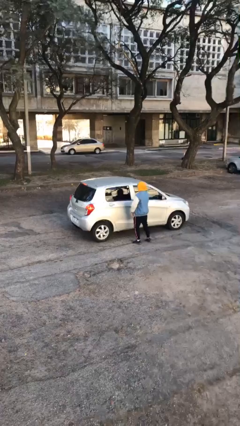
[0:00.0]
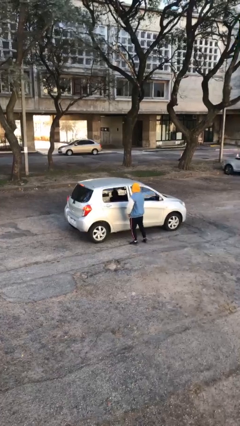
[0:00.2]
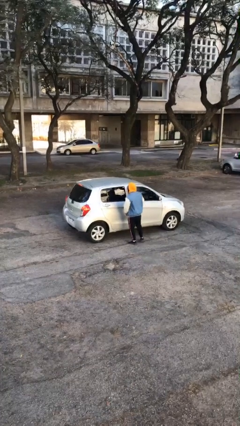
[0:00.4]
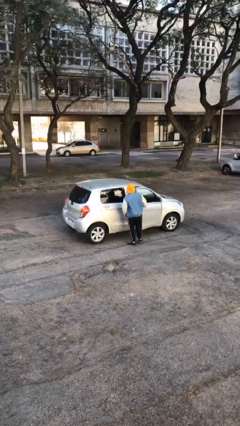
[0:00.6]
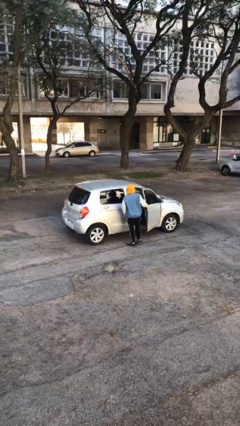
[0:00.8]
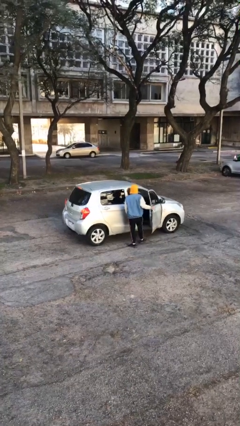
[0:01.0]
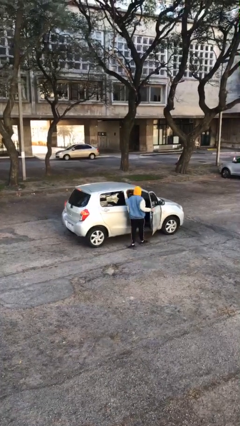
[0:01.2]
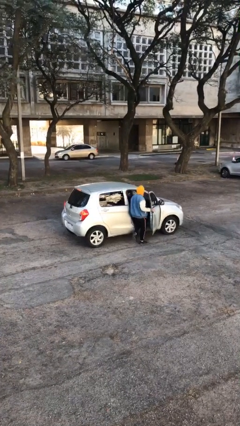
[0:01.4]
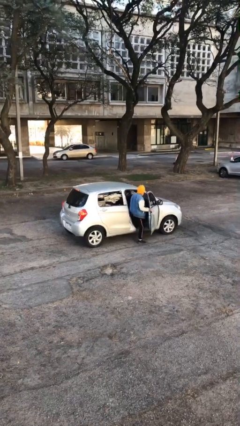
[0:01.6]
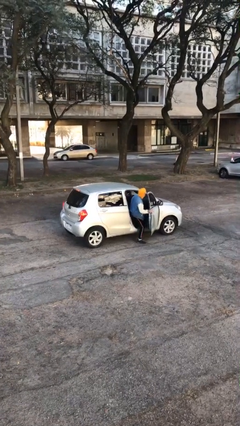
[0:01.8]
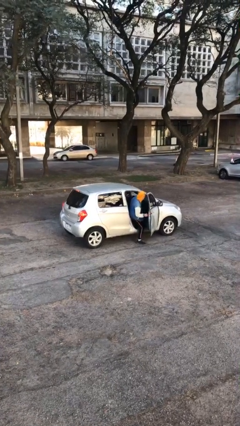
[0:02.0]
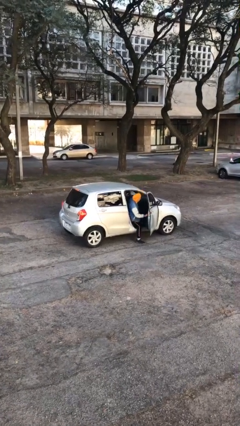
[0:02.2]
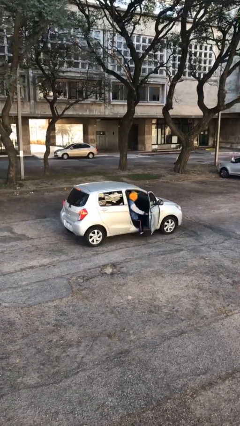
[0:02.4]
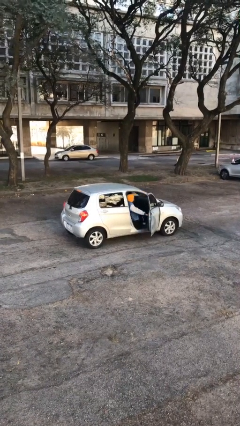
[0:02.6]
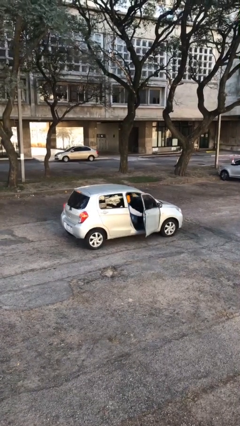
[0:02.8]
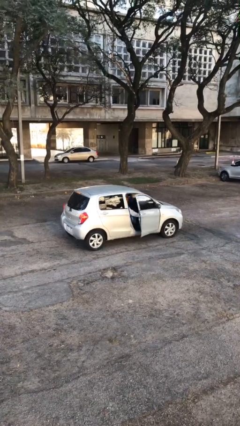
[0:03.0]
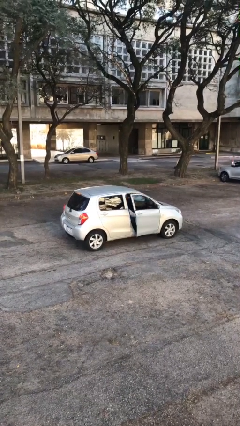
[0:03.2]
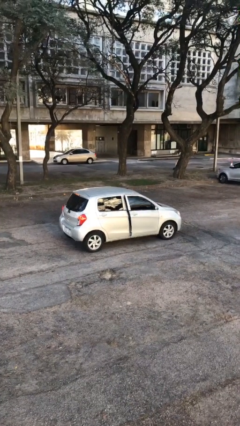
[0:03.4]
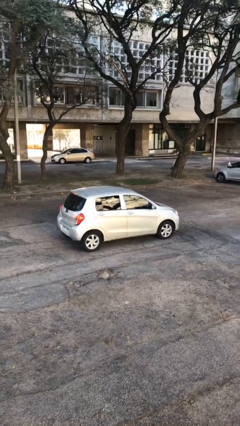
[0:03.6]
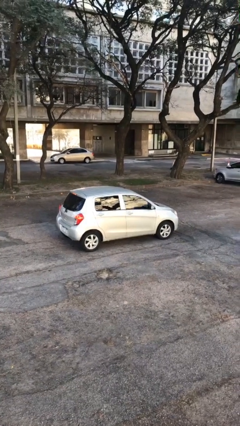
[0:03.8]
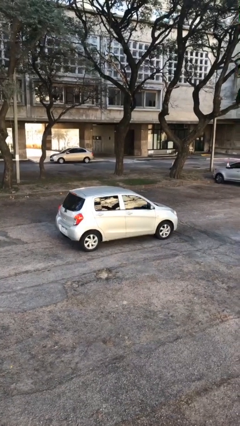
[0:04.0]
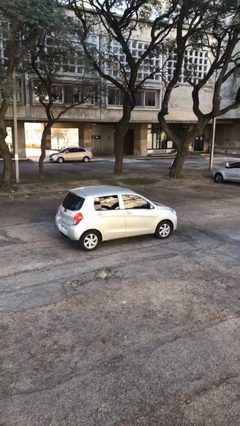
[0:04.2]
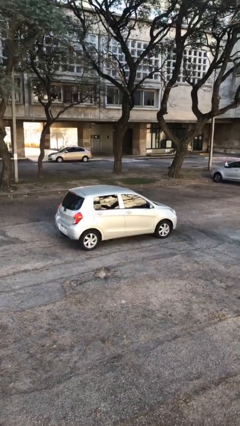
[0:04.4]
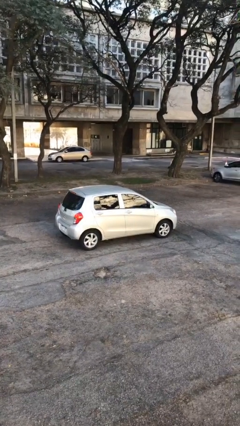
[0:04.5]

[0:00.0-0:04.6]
car picks up person

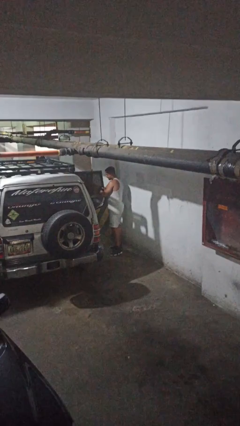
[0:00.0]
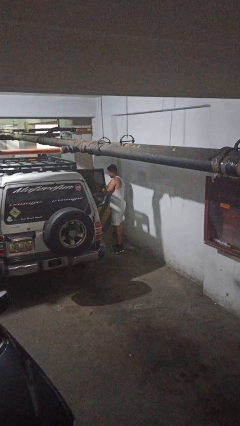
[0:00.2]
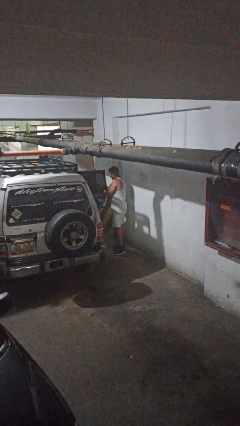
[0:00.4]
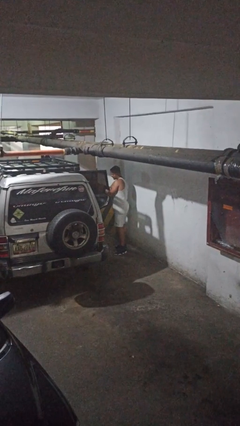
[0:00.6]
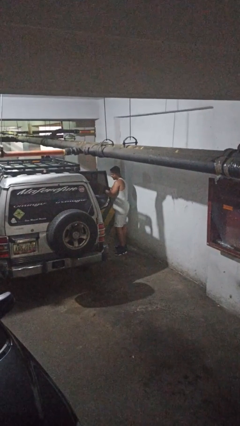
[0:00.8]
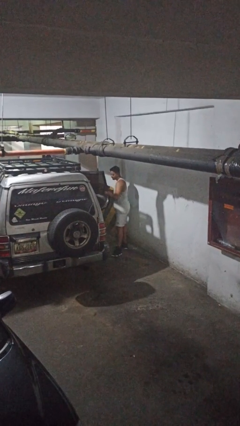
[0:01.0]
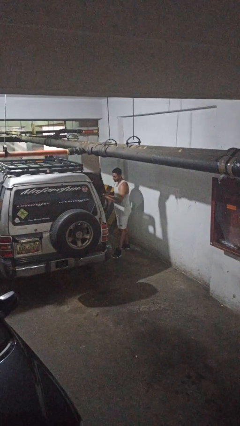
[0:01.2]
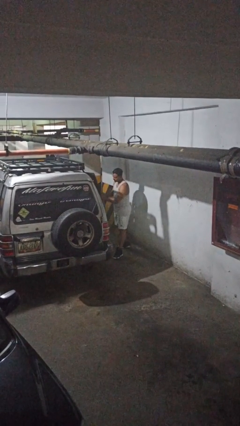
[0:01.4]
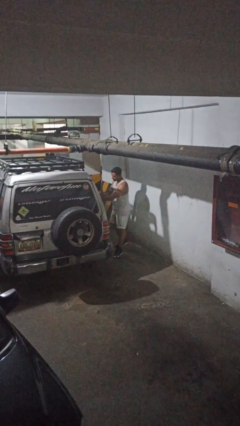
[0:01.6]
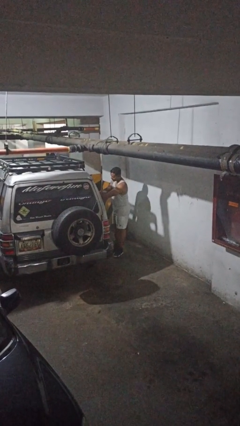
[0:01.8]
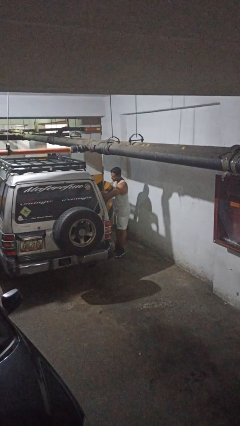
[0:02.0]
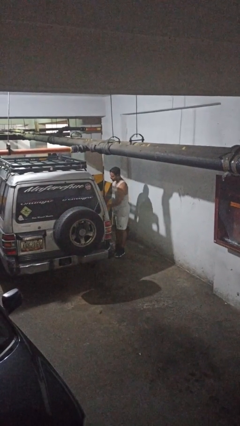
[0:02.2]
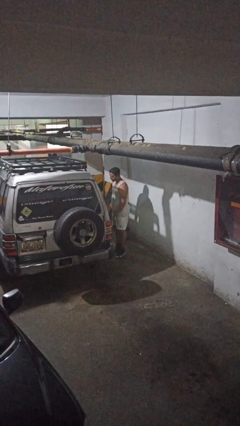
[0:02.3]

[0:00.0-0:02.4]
person closes car door

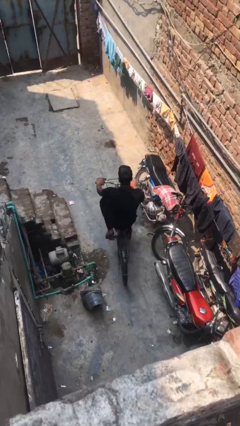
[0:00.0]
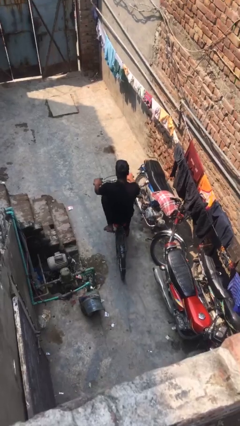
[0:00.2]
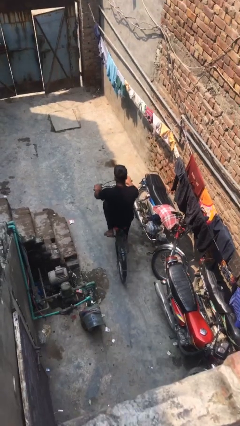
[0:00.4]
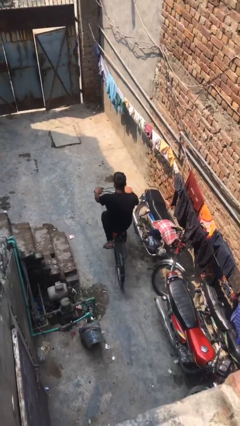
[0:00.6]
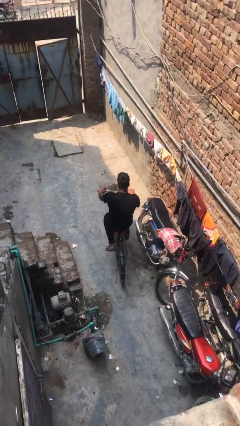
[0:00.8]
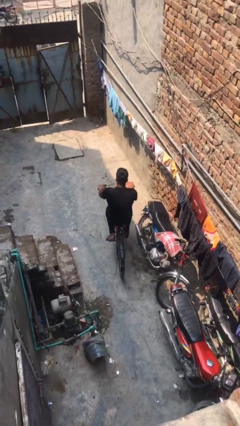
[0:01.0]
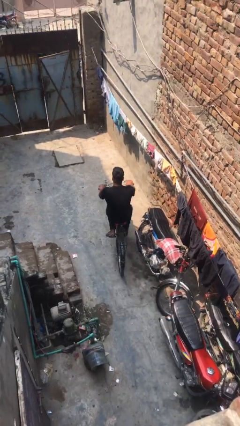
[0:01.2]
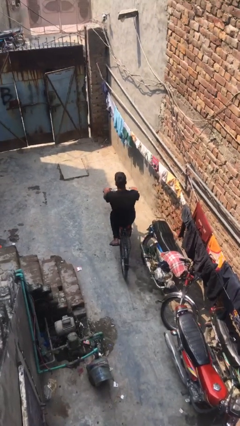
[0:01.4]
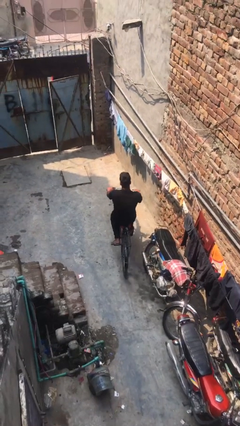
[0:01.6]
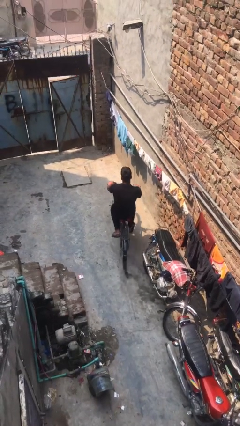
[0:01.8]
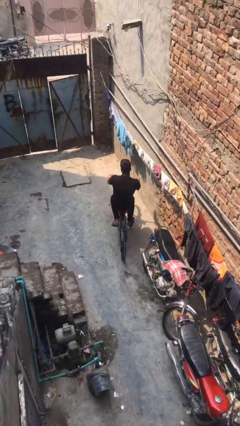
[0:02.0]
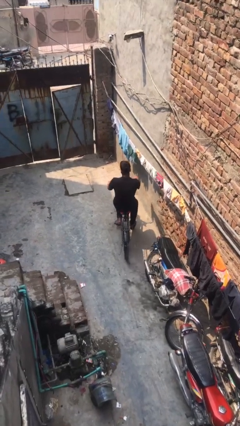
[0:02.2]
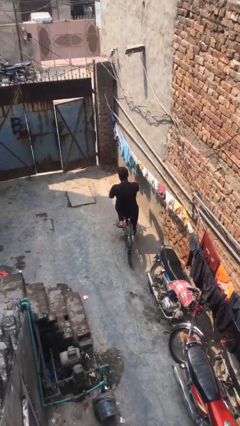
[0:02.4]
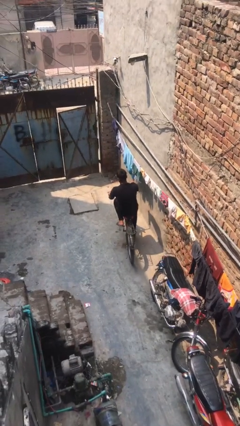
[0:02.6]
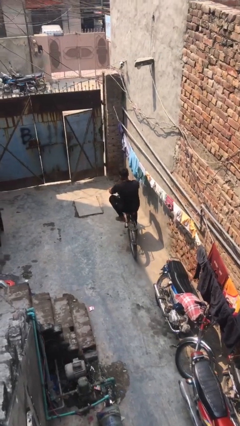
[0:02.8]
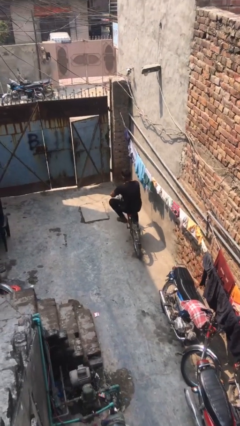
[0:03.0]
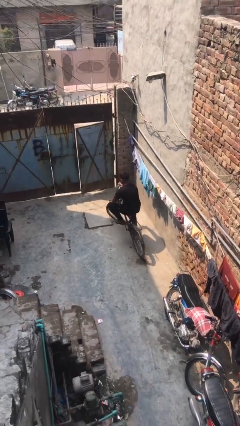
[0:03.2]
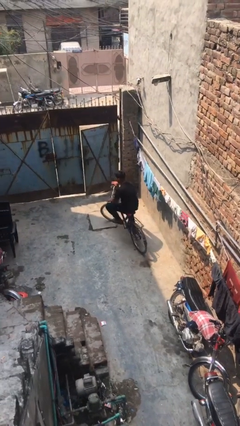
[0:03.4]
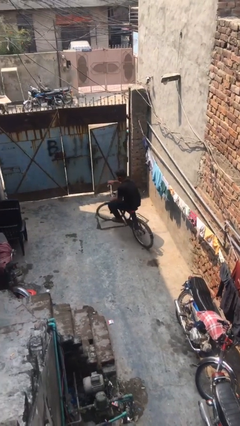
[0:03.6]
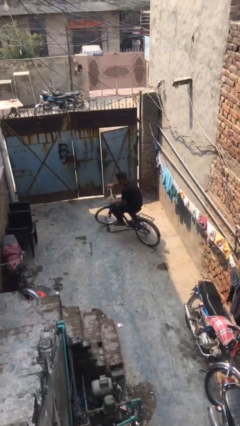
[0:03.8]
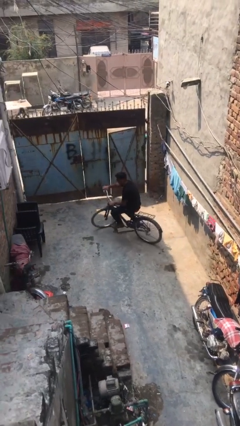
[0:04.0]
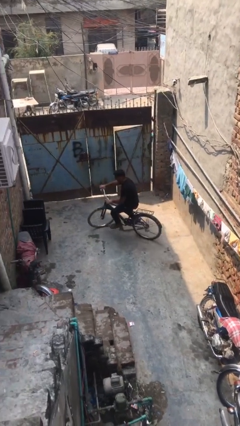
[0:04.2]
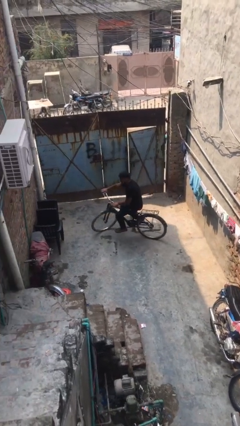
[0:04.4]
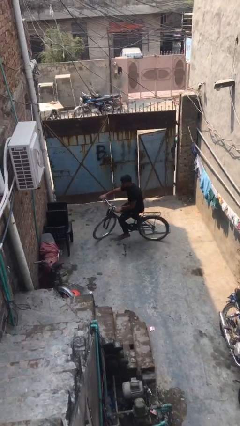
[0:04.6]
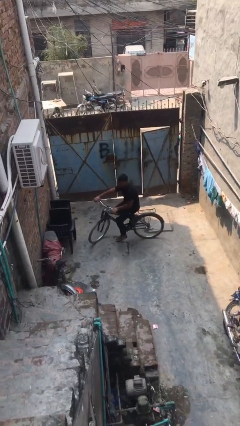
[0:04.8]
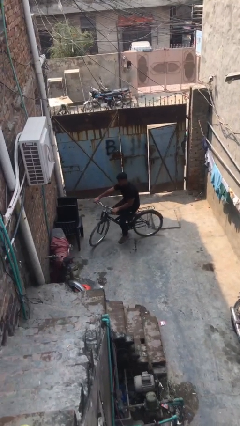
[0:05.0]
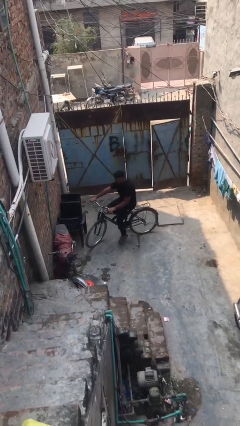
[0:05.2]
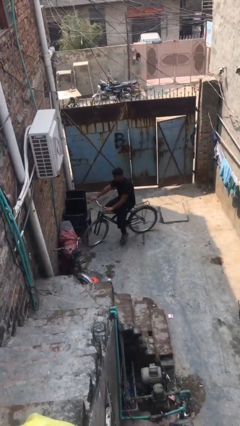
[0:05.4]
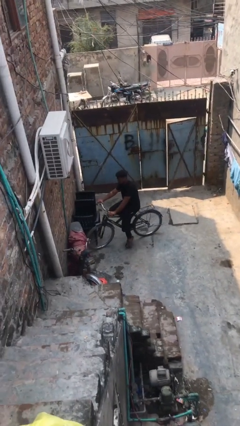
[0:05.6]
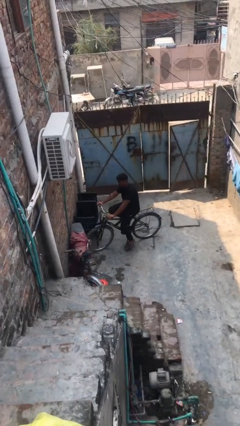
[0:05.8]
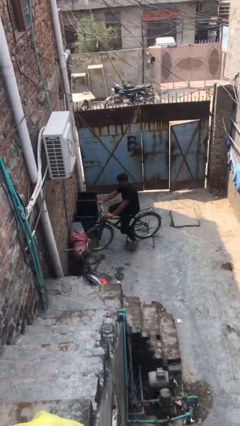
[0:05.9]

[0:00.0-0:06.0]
person rides bicycle

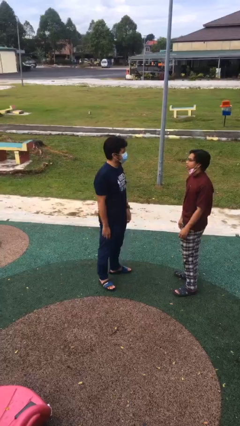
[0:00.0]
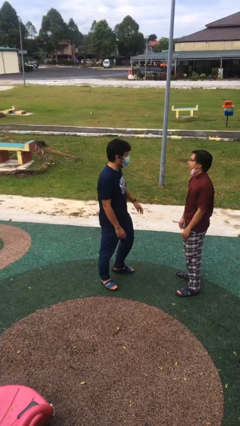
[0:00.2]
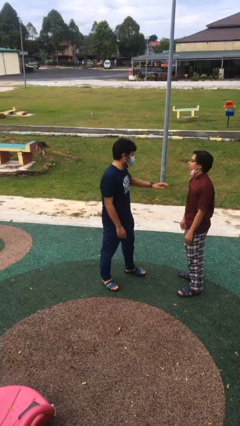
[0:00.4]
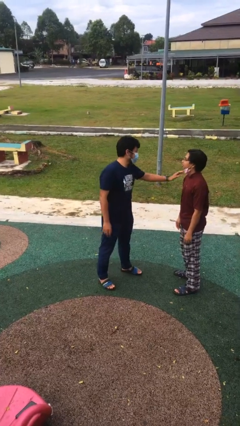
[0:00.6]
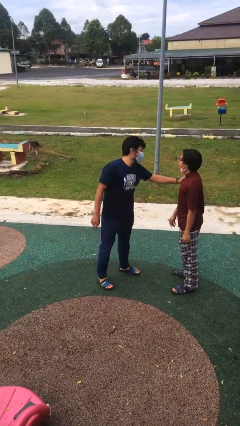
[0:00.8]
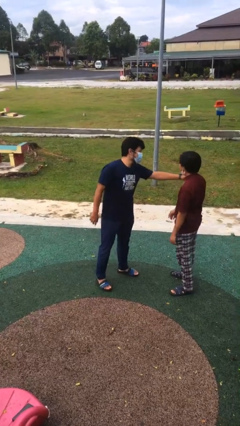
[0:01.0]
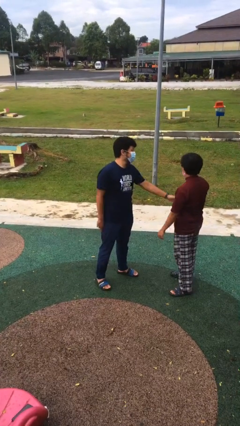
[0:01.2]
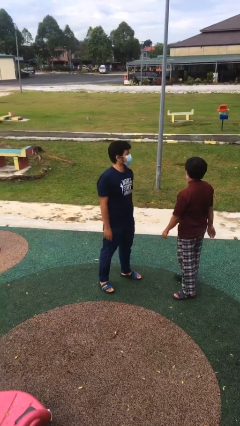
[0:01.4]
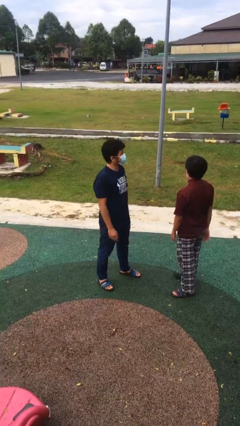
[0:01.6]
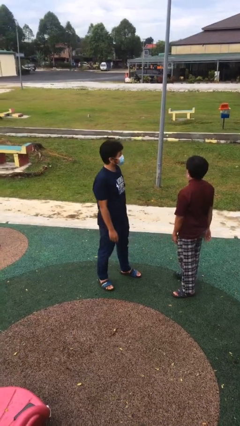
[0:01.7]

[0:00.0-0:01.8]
person shoves person

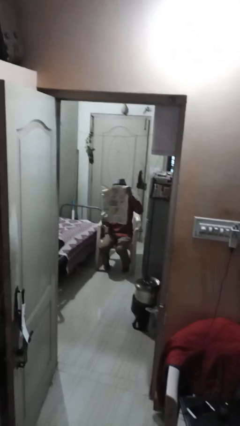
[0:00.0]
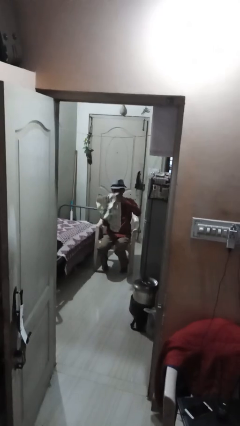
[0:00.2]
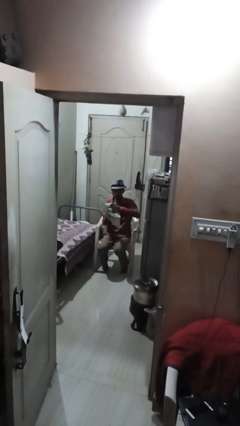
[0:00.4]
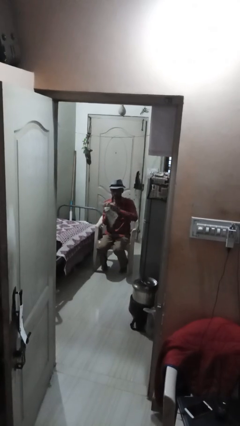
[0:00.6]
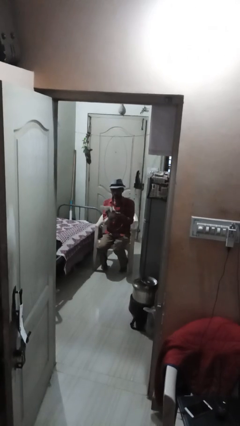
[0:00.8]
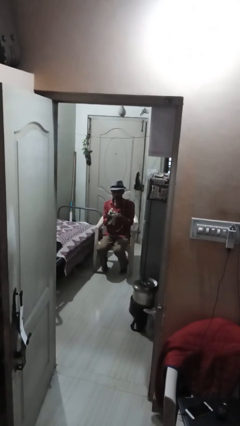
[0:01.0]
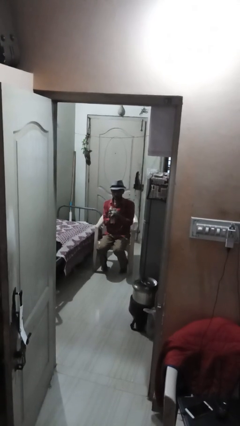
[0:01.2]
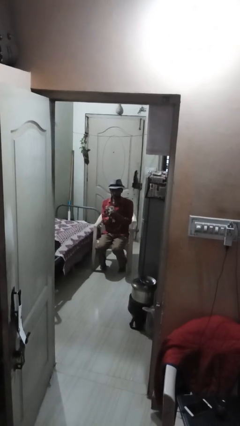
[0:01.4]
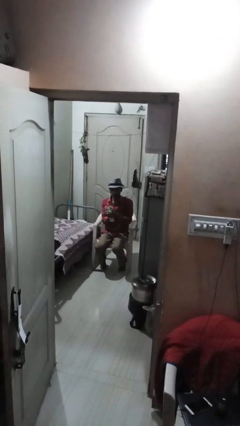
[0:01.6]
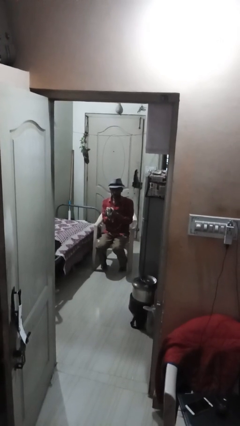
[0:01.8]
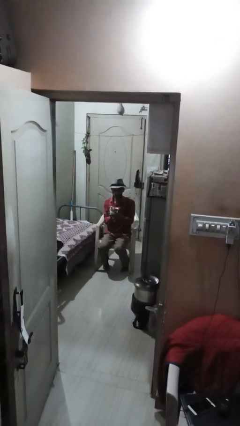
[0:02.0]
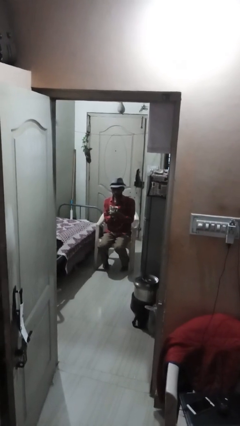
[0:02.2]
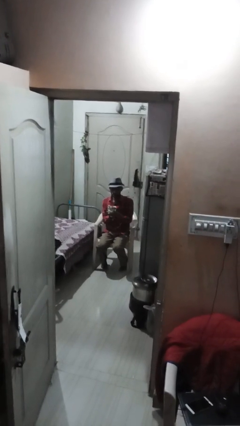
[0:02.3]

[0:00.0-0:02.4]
person crumples paper

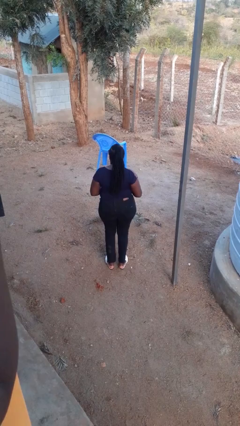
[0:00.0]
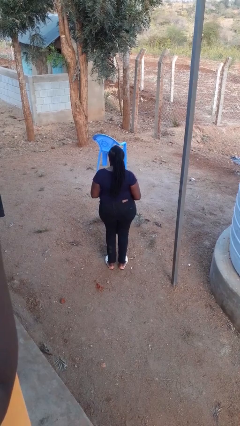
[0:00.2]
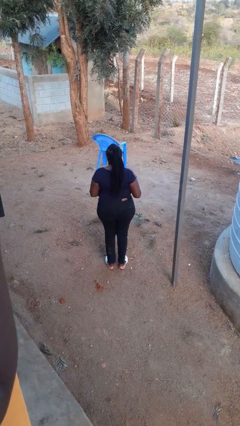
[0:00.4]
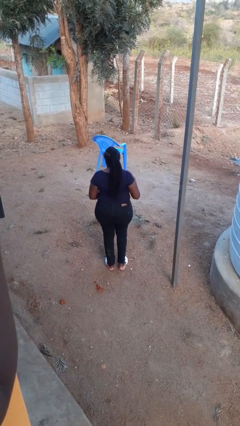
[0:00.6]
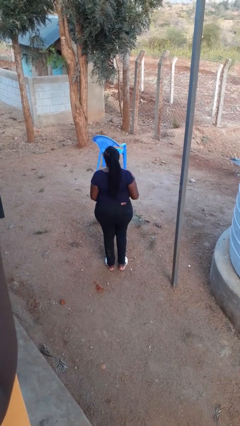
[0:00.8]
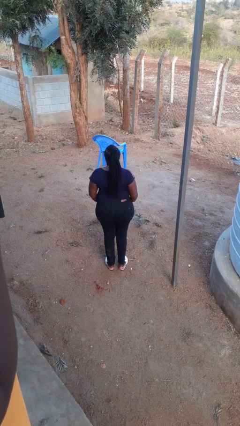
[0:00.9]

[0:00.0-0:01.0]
person wiggles hips
